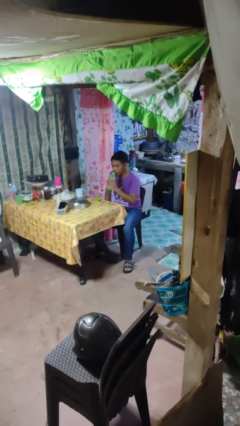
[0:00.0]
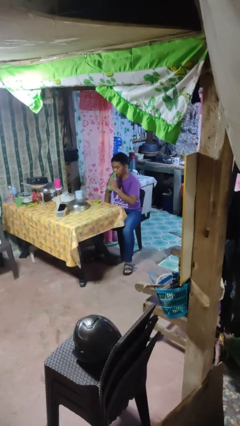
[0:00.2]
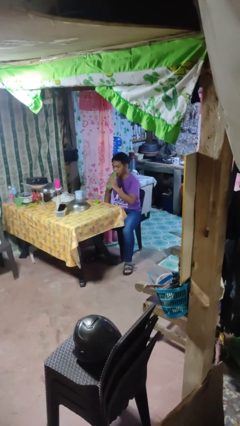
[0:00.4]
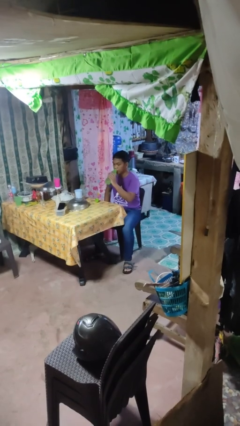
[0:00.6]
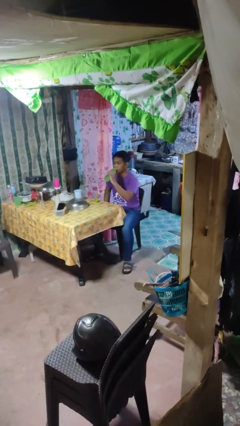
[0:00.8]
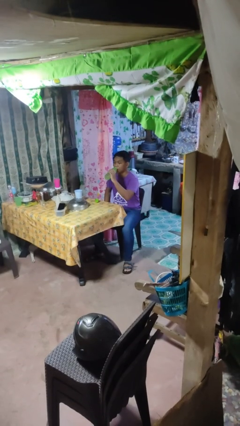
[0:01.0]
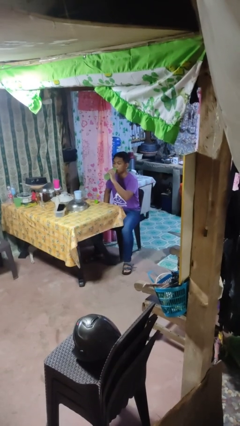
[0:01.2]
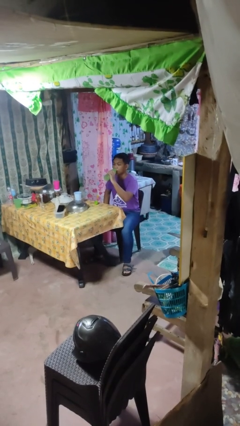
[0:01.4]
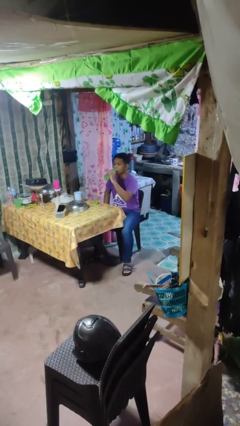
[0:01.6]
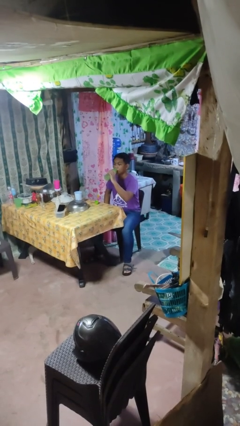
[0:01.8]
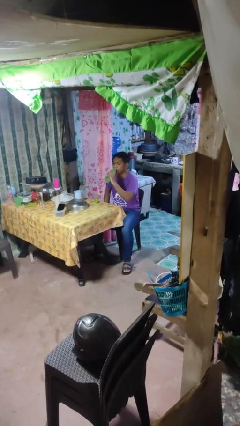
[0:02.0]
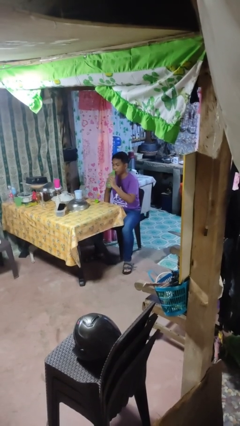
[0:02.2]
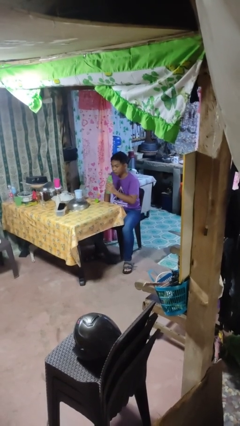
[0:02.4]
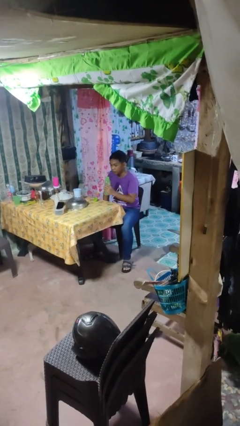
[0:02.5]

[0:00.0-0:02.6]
person drinks from bottle

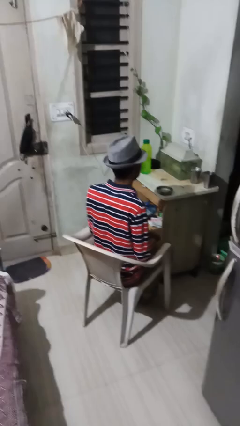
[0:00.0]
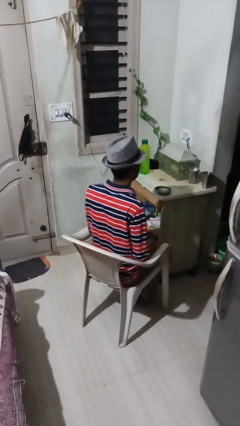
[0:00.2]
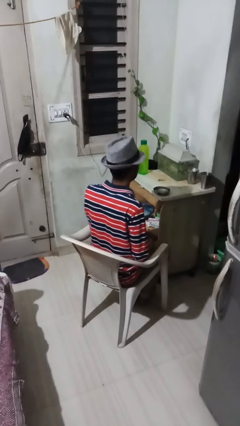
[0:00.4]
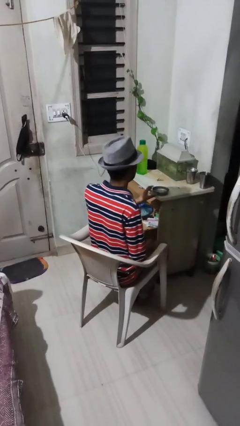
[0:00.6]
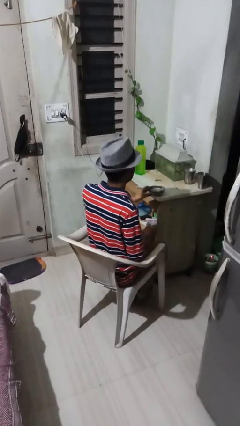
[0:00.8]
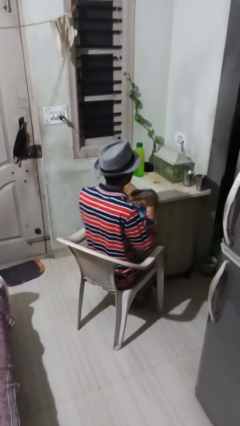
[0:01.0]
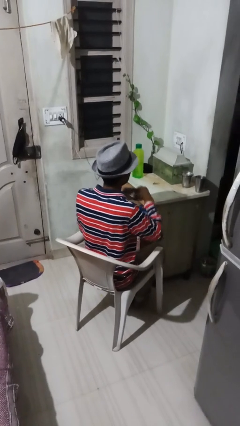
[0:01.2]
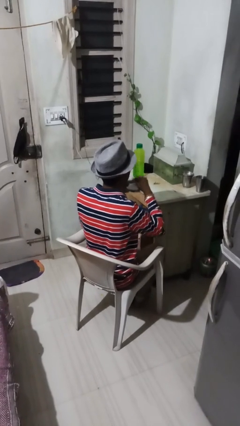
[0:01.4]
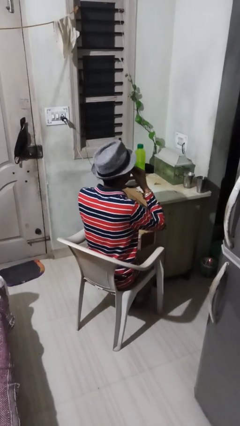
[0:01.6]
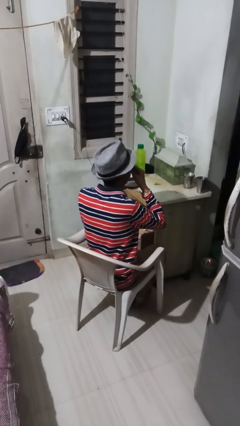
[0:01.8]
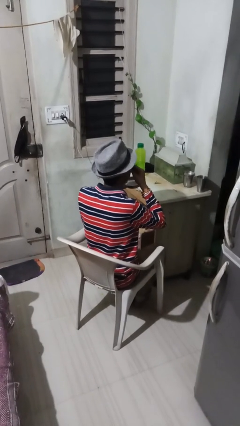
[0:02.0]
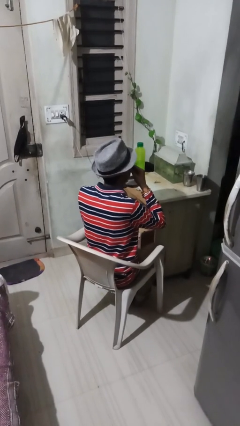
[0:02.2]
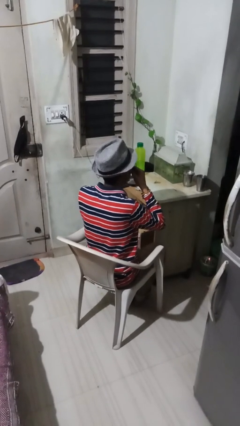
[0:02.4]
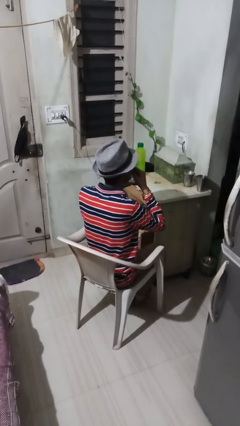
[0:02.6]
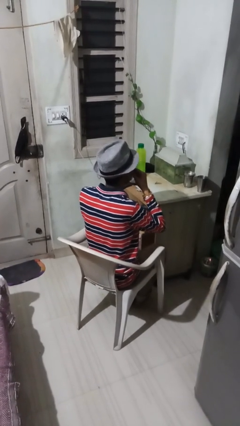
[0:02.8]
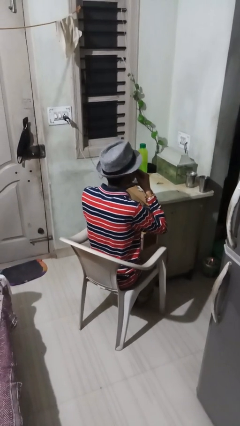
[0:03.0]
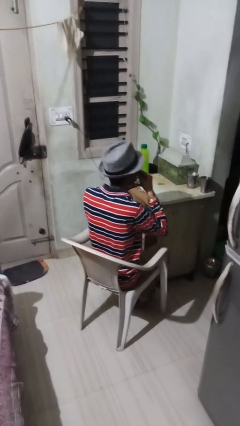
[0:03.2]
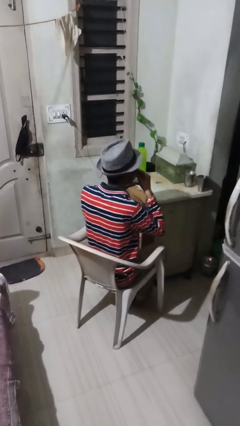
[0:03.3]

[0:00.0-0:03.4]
person eats with hands

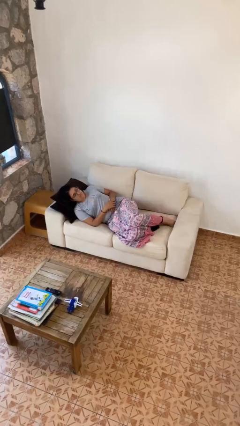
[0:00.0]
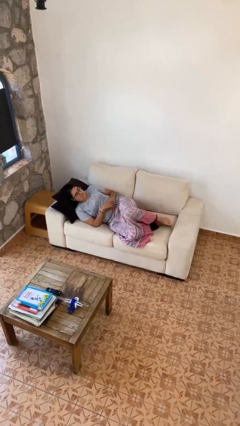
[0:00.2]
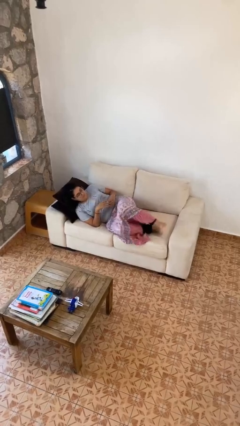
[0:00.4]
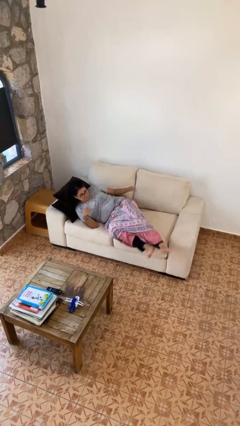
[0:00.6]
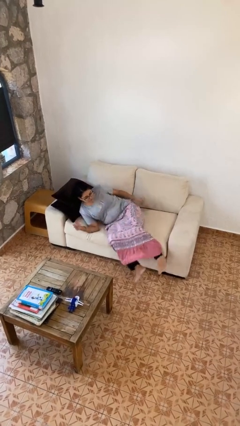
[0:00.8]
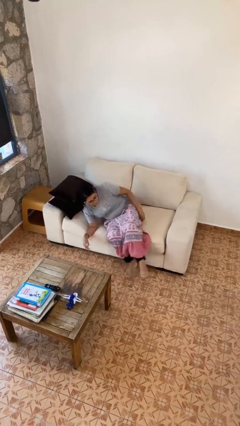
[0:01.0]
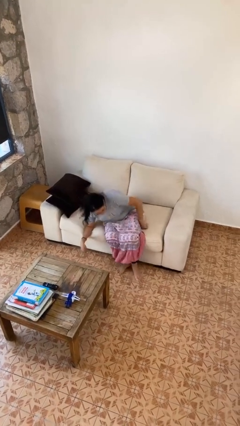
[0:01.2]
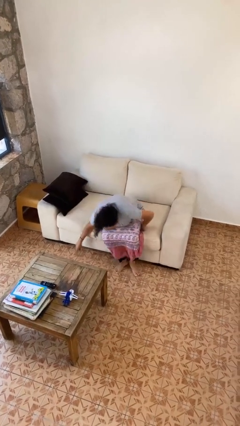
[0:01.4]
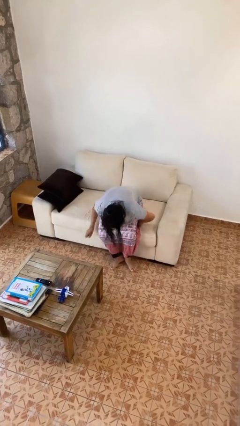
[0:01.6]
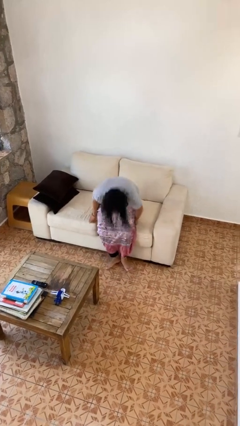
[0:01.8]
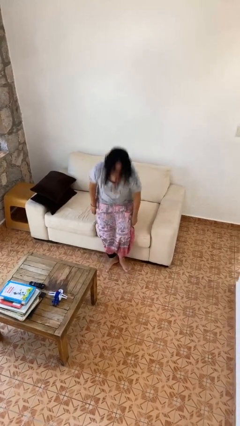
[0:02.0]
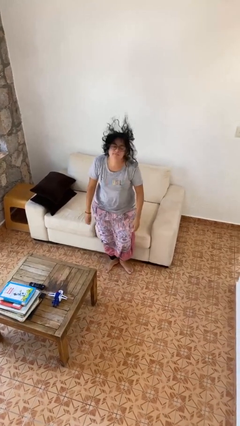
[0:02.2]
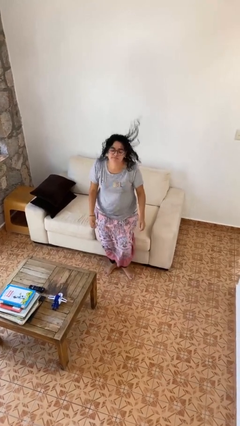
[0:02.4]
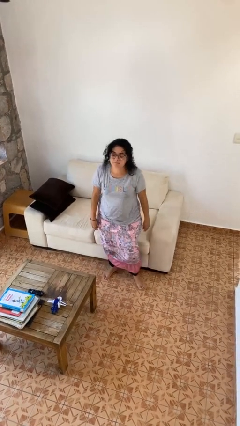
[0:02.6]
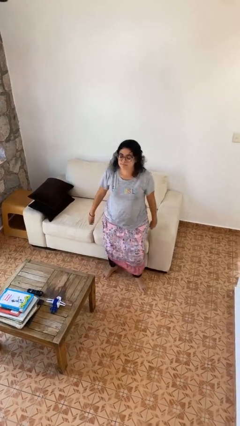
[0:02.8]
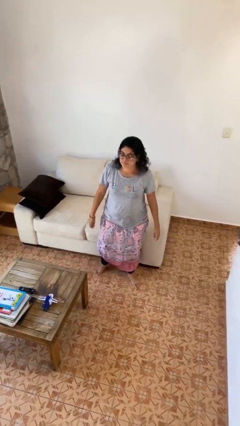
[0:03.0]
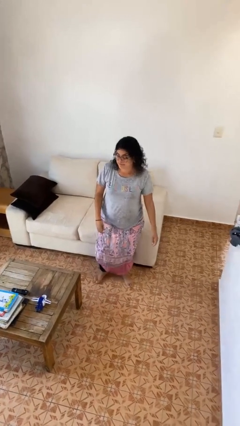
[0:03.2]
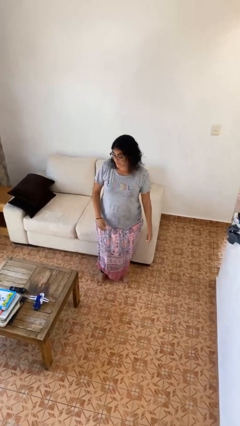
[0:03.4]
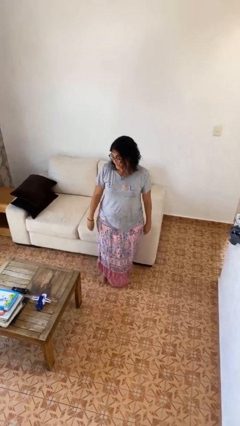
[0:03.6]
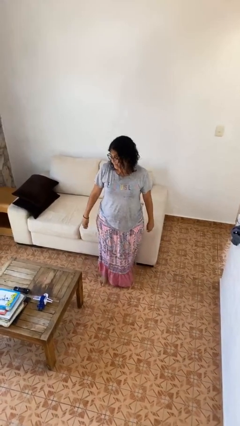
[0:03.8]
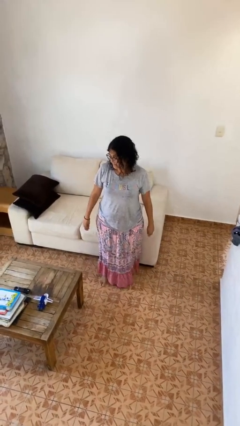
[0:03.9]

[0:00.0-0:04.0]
person stands up

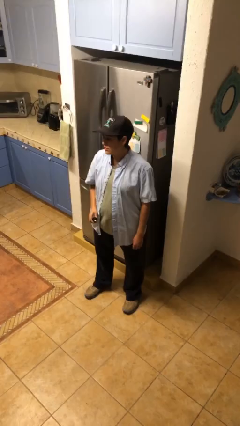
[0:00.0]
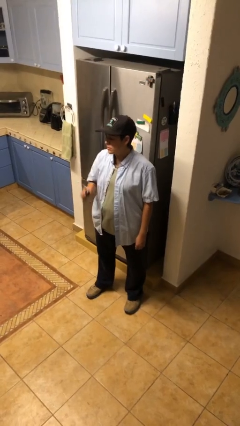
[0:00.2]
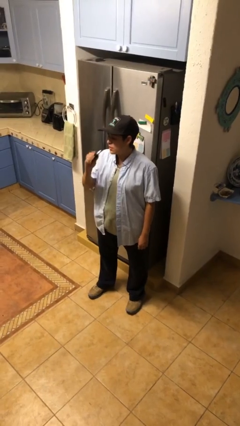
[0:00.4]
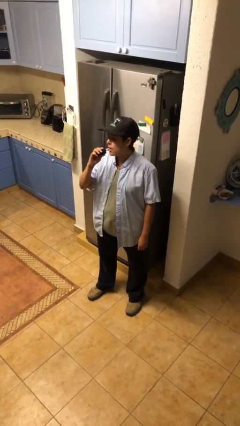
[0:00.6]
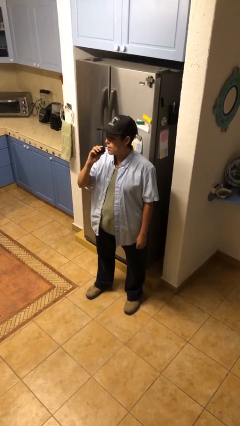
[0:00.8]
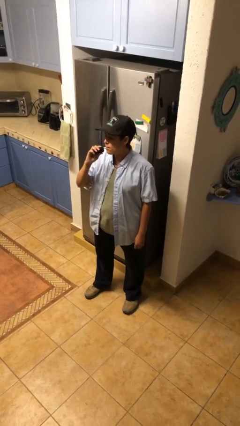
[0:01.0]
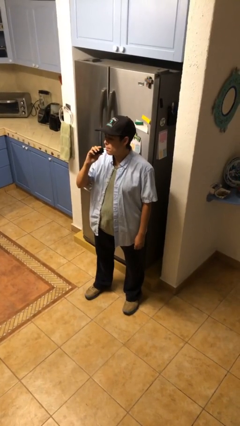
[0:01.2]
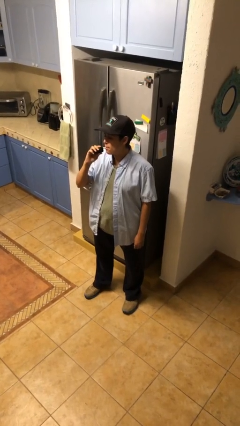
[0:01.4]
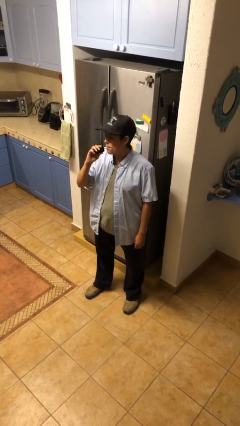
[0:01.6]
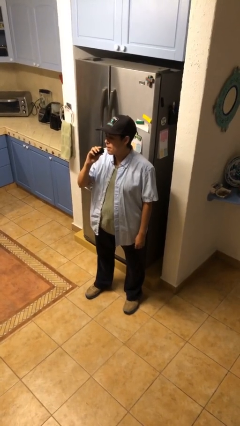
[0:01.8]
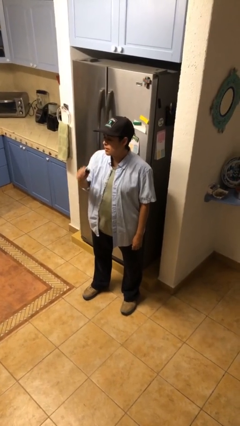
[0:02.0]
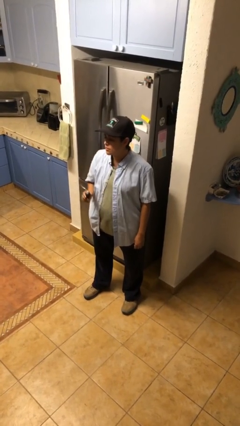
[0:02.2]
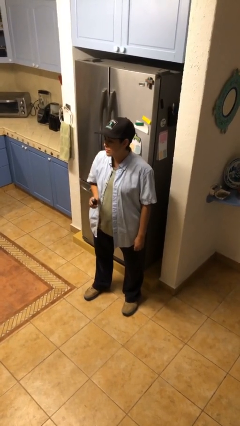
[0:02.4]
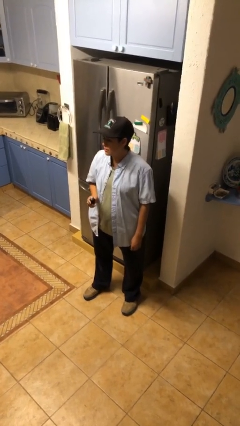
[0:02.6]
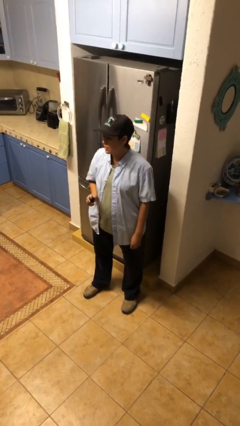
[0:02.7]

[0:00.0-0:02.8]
person vapes

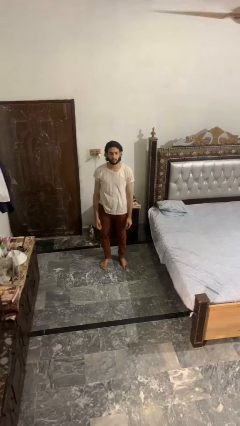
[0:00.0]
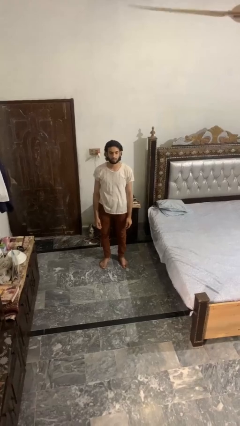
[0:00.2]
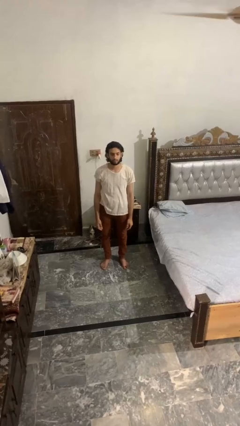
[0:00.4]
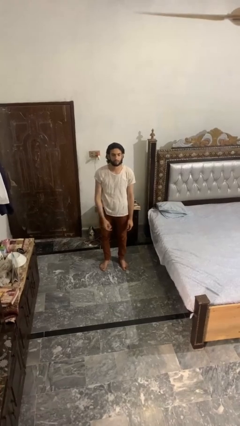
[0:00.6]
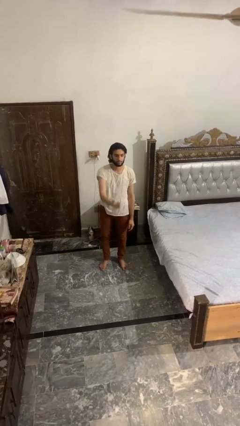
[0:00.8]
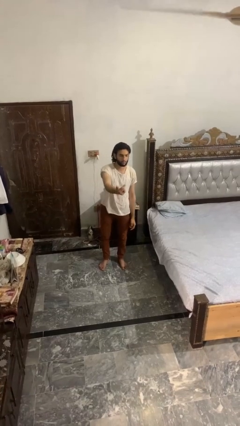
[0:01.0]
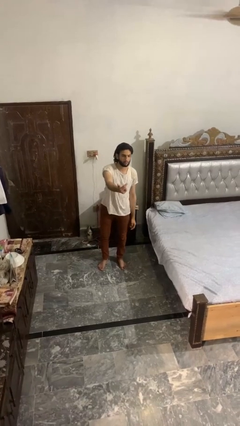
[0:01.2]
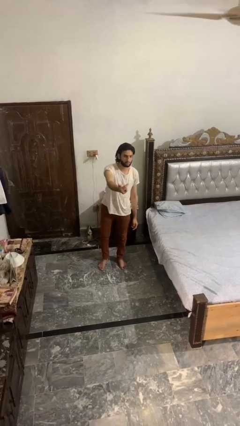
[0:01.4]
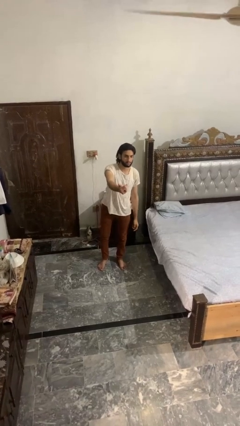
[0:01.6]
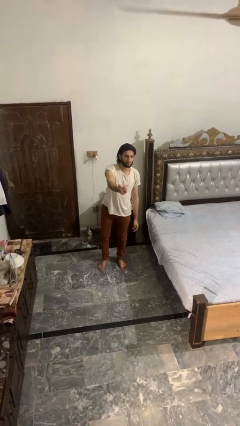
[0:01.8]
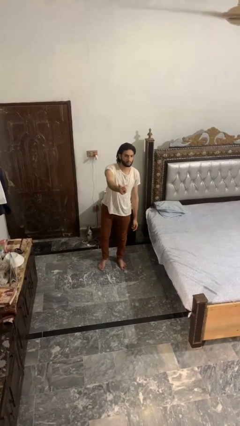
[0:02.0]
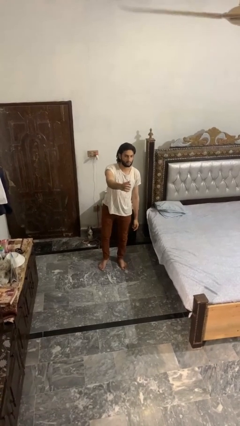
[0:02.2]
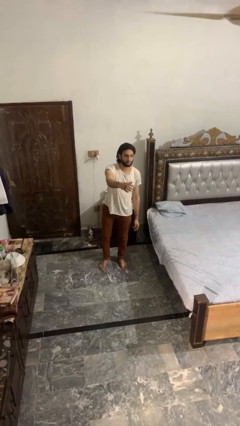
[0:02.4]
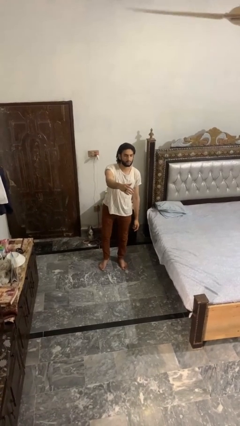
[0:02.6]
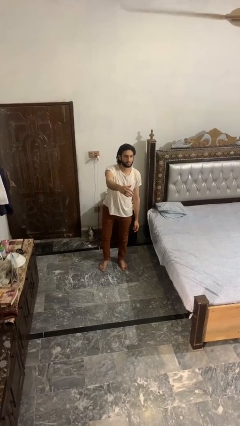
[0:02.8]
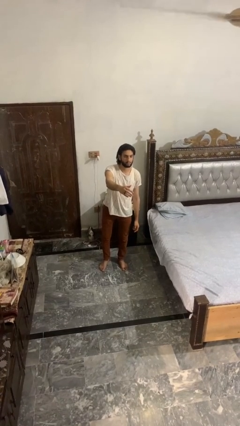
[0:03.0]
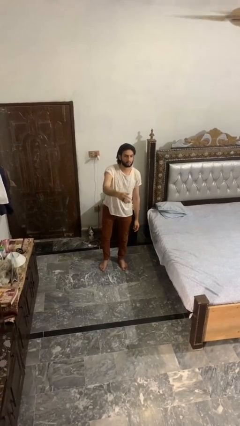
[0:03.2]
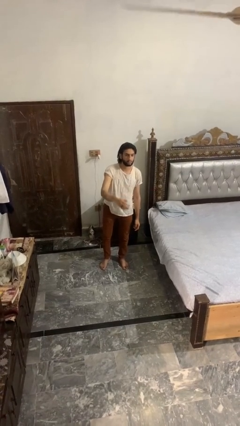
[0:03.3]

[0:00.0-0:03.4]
person gestures come here

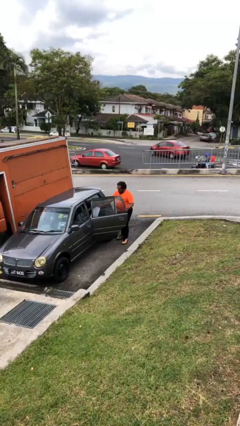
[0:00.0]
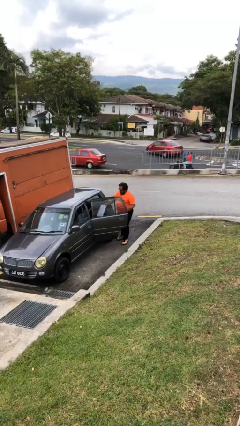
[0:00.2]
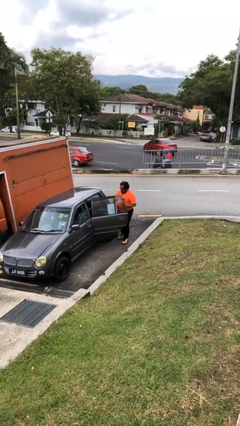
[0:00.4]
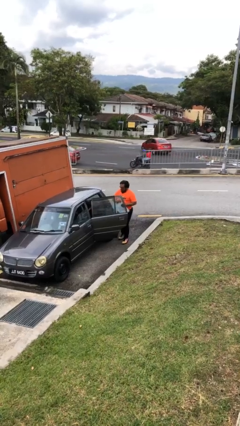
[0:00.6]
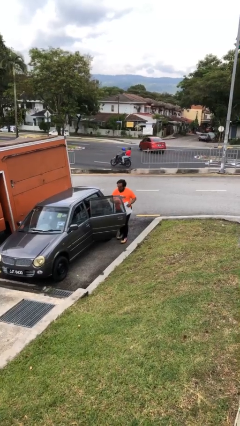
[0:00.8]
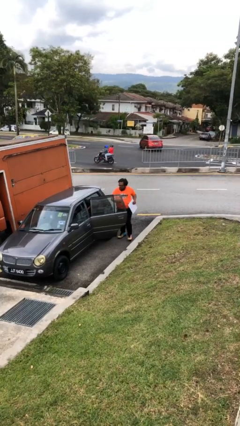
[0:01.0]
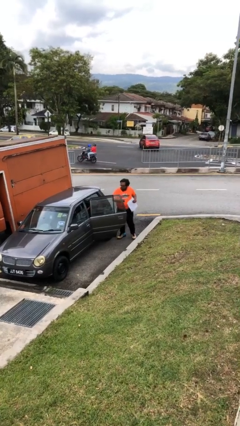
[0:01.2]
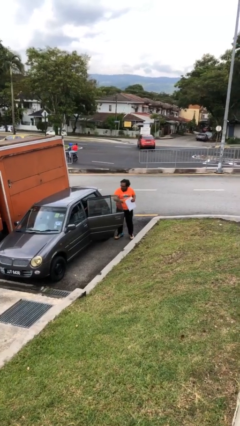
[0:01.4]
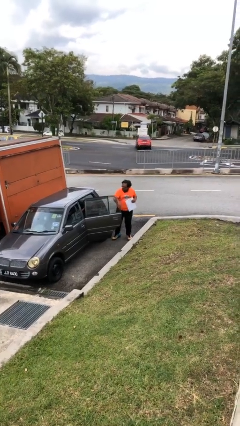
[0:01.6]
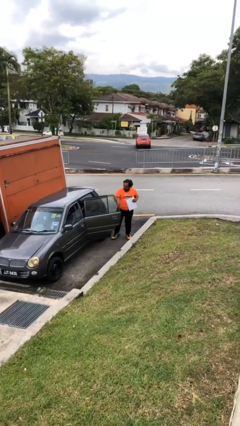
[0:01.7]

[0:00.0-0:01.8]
person unloads car
